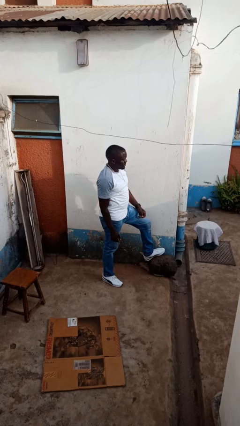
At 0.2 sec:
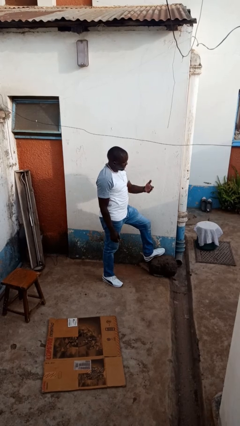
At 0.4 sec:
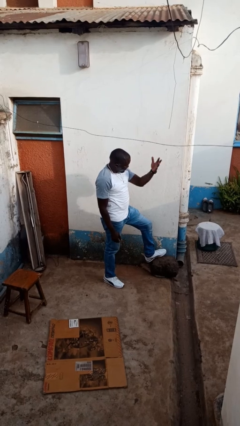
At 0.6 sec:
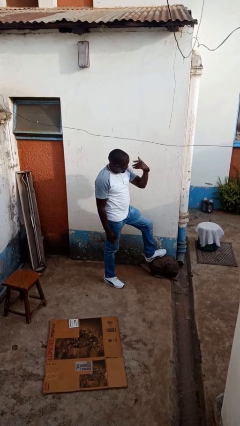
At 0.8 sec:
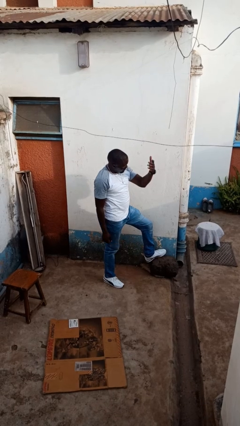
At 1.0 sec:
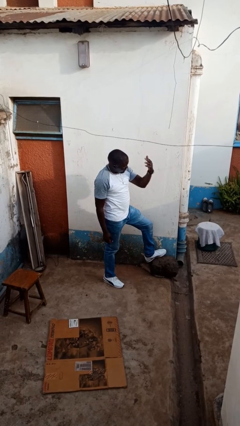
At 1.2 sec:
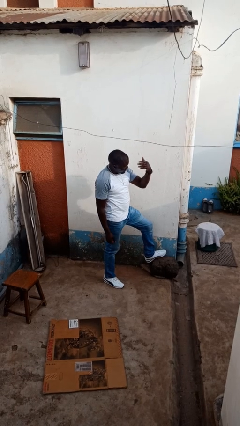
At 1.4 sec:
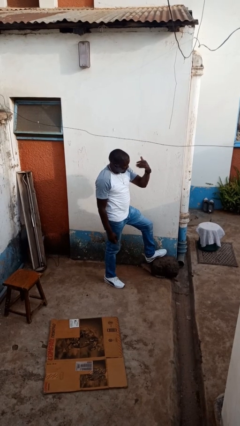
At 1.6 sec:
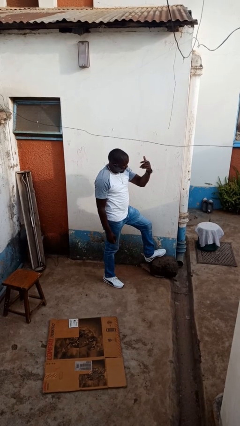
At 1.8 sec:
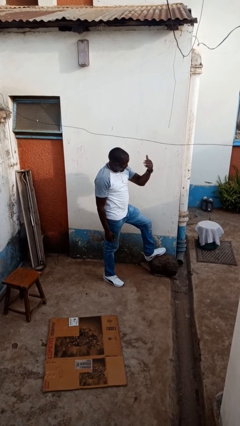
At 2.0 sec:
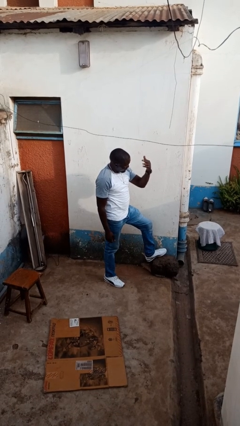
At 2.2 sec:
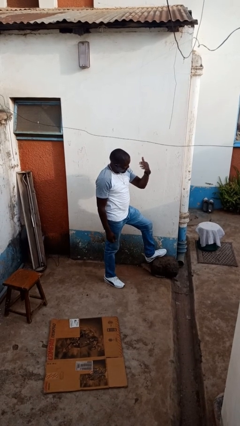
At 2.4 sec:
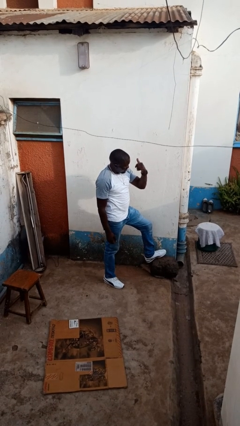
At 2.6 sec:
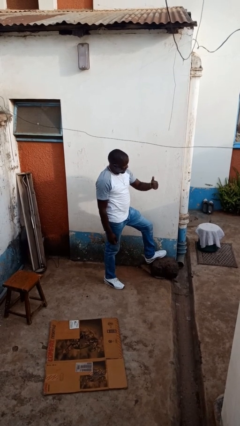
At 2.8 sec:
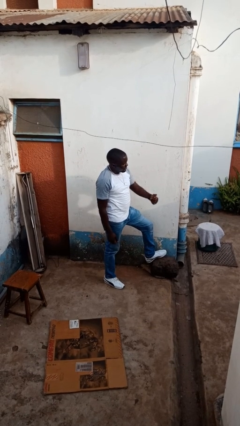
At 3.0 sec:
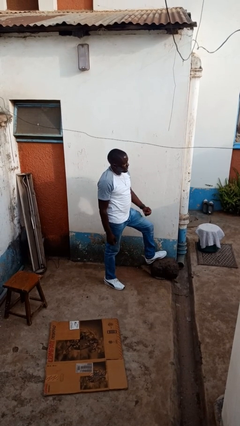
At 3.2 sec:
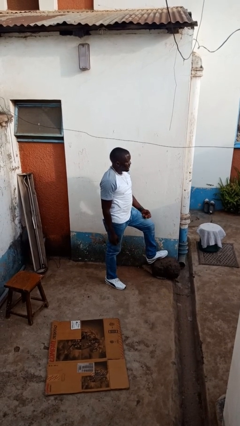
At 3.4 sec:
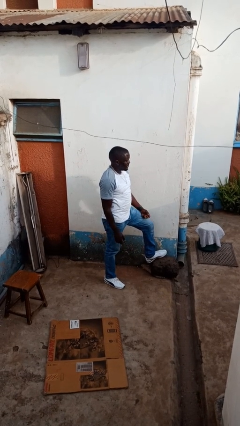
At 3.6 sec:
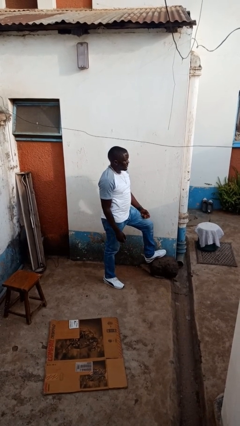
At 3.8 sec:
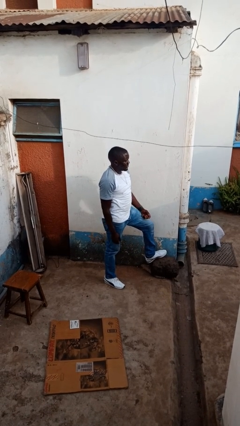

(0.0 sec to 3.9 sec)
person gestures come here

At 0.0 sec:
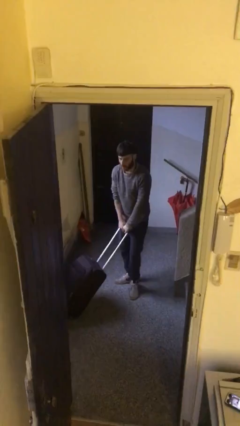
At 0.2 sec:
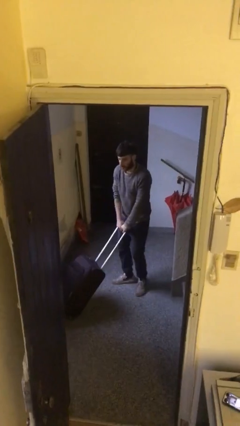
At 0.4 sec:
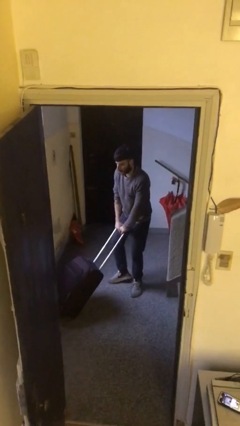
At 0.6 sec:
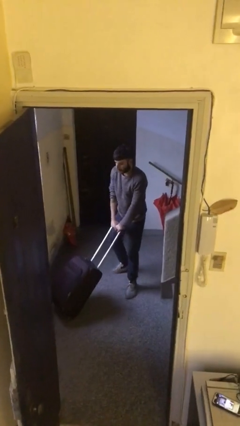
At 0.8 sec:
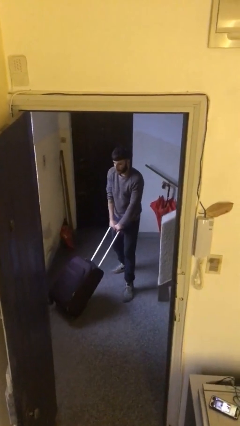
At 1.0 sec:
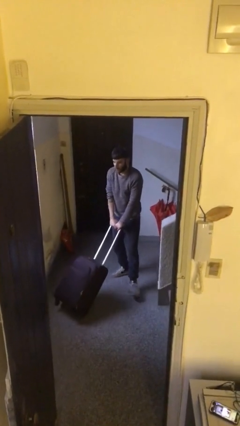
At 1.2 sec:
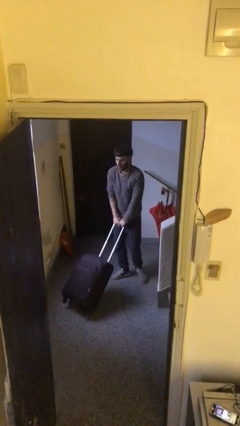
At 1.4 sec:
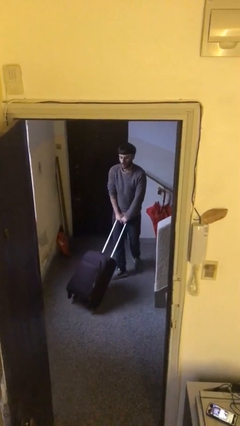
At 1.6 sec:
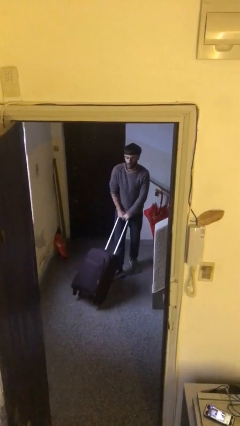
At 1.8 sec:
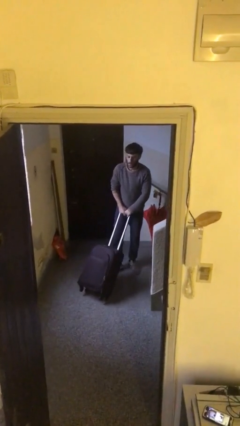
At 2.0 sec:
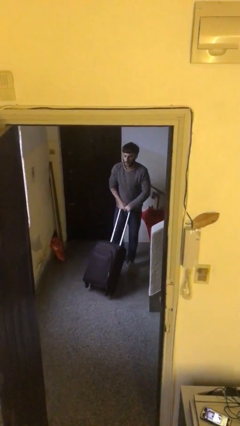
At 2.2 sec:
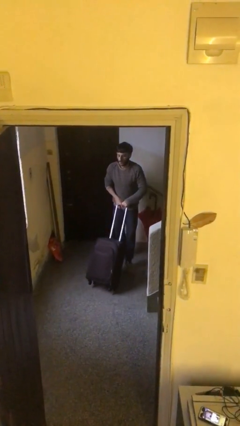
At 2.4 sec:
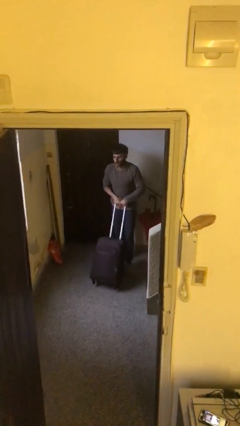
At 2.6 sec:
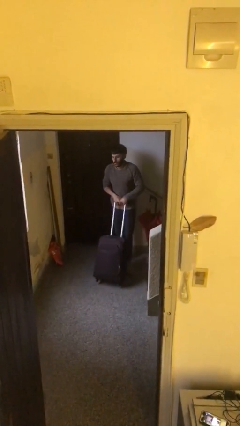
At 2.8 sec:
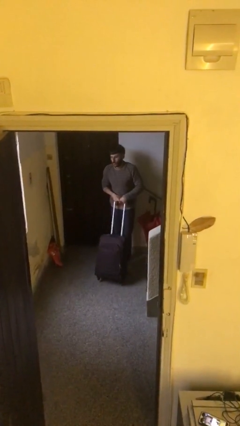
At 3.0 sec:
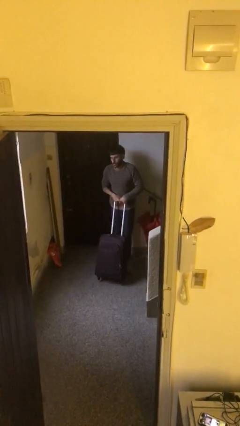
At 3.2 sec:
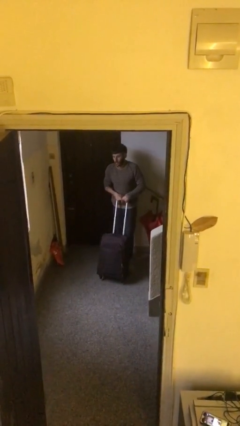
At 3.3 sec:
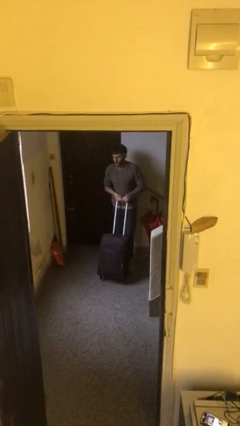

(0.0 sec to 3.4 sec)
person pulls wheeled cart

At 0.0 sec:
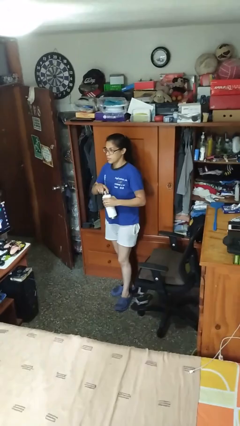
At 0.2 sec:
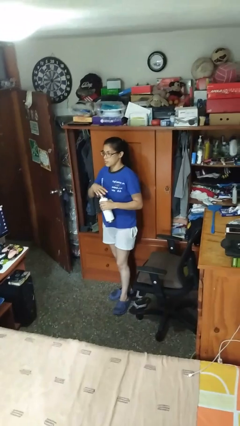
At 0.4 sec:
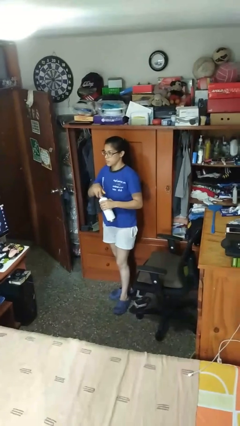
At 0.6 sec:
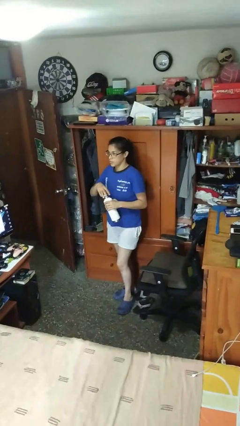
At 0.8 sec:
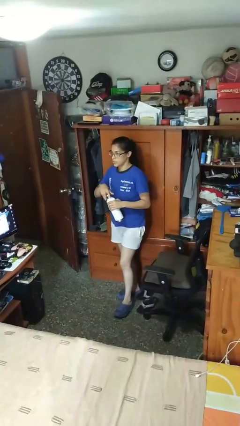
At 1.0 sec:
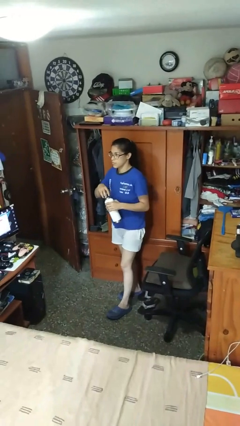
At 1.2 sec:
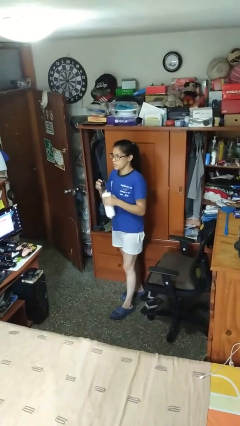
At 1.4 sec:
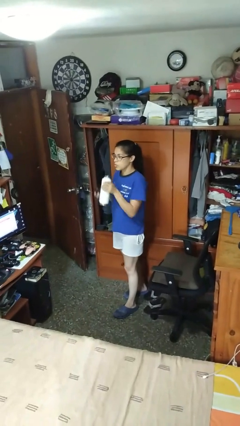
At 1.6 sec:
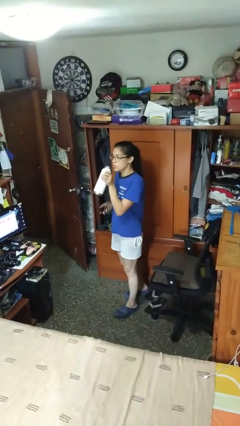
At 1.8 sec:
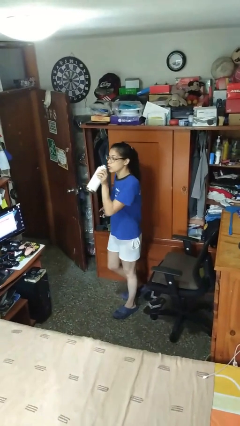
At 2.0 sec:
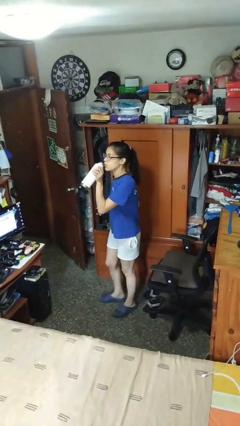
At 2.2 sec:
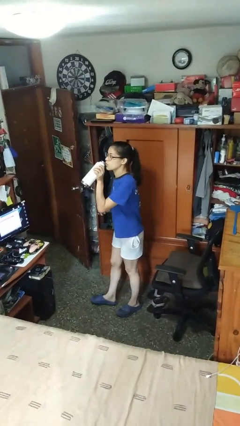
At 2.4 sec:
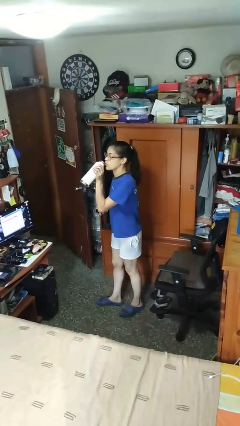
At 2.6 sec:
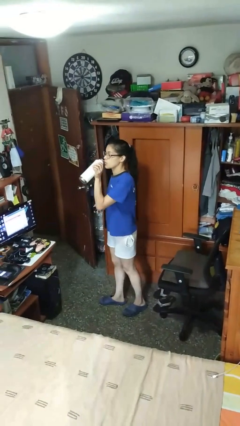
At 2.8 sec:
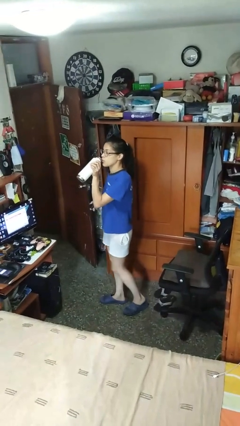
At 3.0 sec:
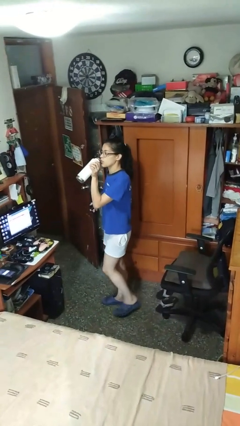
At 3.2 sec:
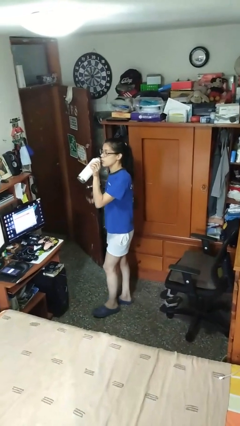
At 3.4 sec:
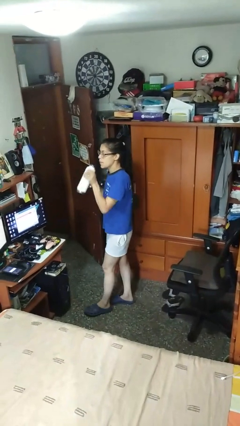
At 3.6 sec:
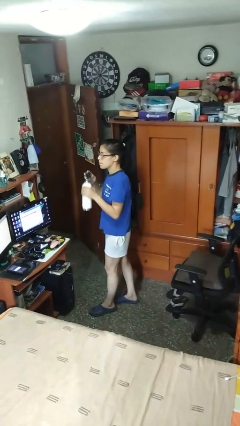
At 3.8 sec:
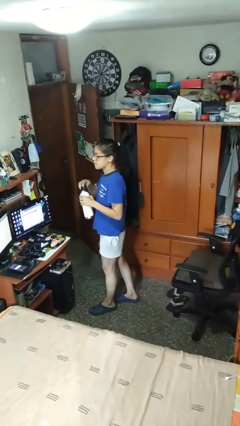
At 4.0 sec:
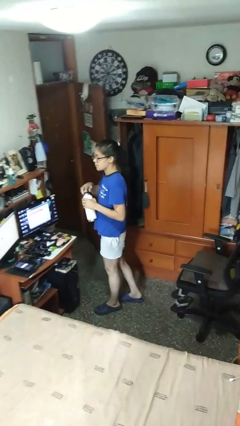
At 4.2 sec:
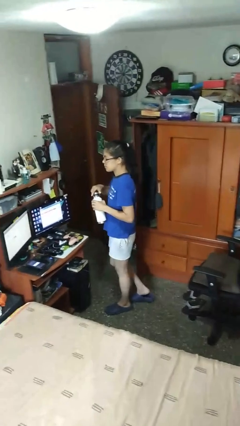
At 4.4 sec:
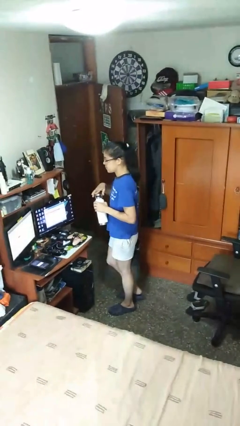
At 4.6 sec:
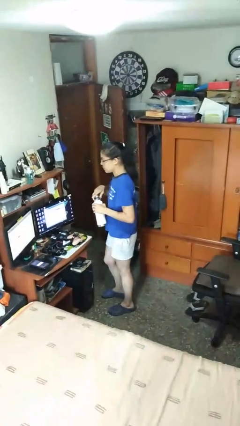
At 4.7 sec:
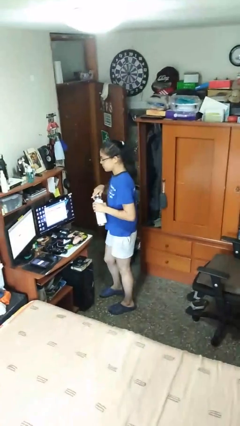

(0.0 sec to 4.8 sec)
person drinks from bottle

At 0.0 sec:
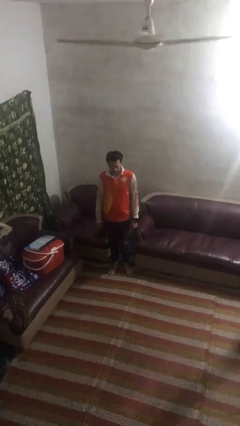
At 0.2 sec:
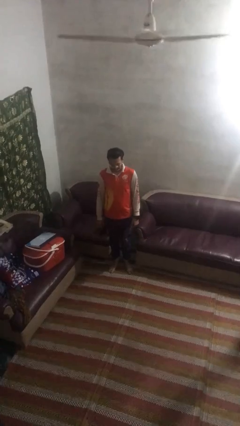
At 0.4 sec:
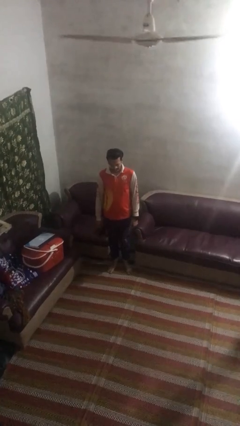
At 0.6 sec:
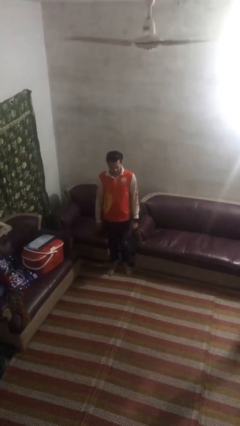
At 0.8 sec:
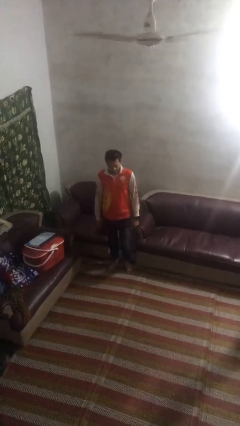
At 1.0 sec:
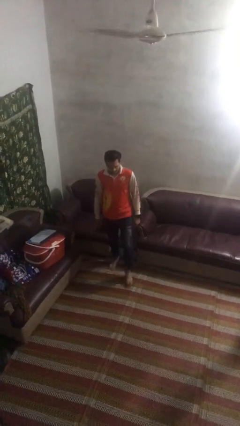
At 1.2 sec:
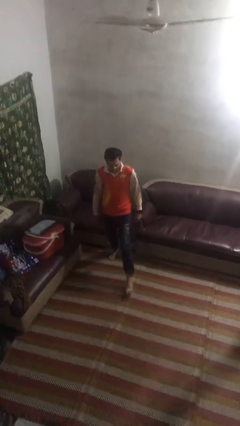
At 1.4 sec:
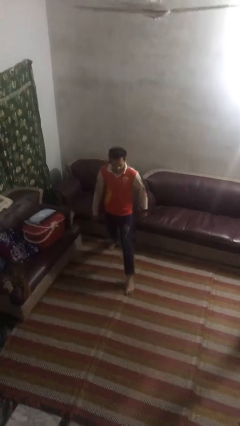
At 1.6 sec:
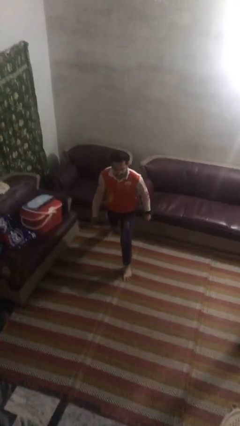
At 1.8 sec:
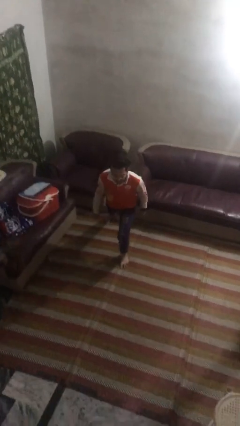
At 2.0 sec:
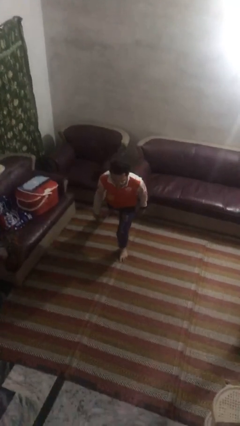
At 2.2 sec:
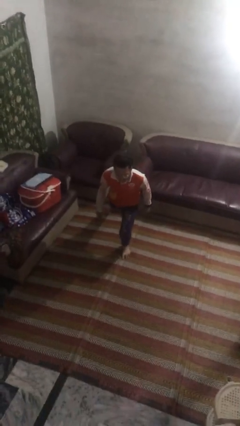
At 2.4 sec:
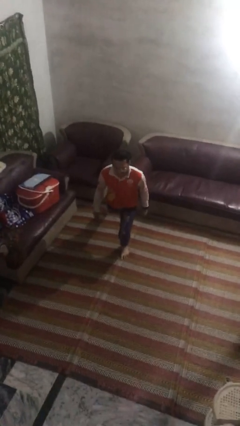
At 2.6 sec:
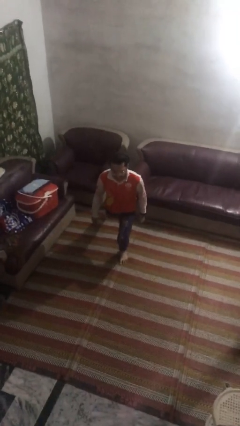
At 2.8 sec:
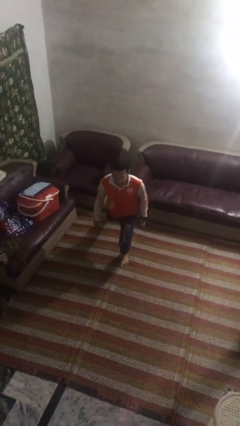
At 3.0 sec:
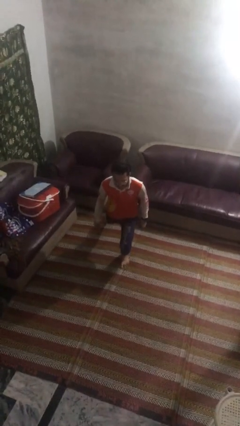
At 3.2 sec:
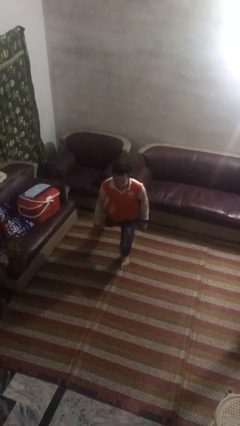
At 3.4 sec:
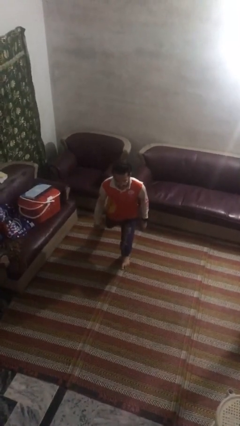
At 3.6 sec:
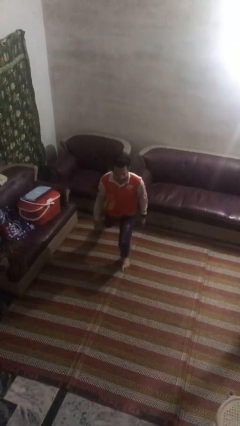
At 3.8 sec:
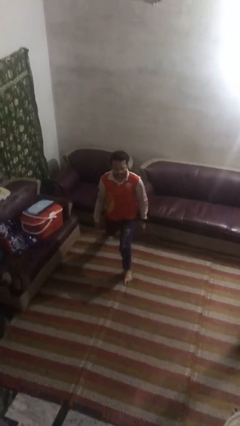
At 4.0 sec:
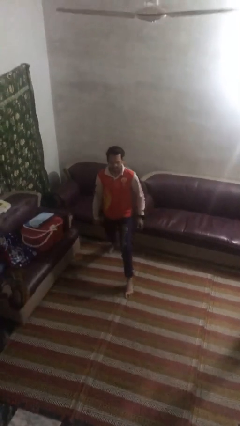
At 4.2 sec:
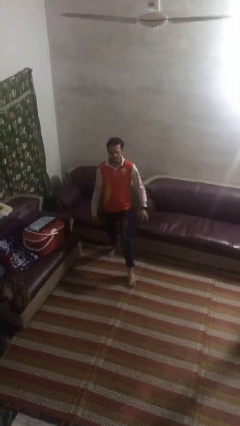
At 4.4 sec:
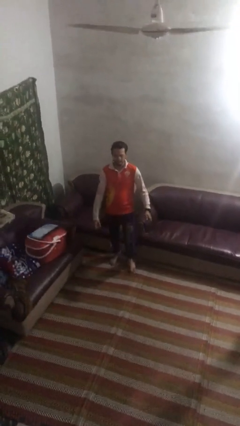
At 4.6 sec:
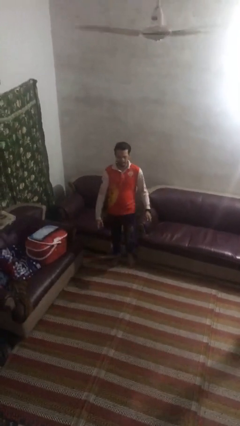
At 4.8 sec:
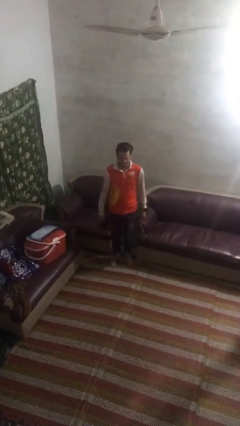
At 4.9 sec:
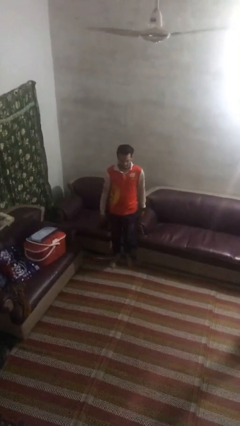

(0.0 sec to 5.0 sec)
person exercises with lunges

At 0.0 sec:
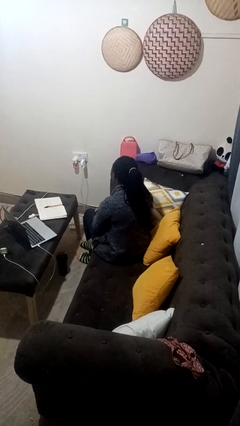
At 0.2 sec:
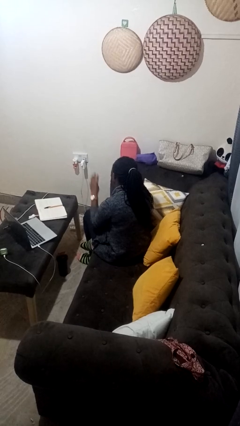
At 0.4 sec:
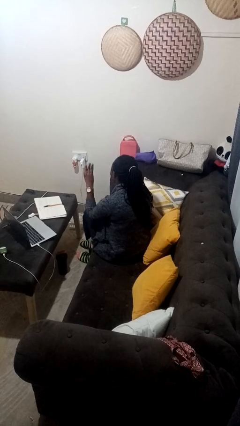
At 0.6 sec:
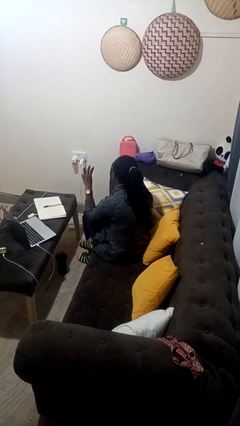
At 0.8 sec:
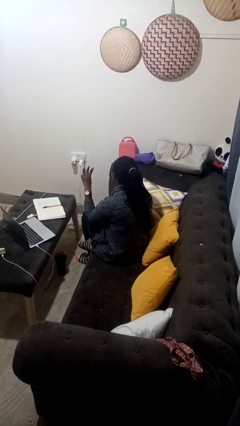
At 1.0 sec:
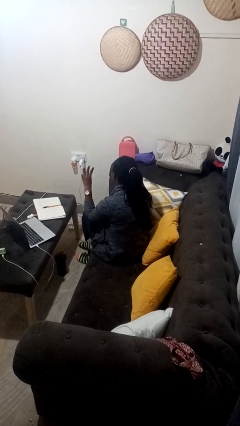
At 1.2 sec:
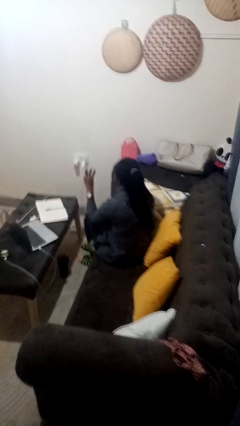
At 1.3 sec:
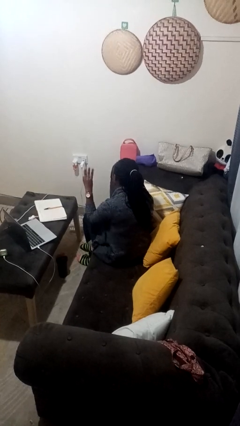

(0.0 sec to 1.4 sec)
person gestures number three
